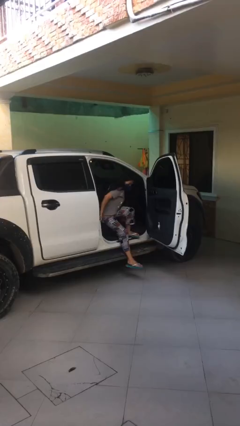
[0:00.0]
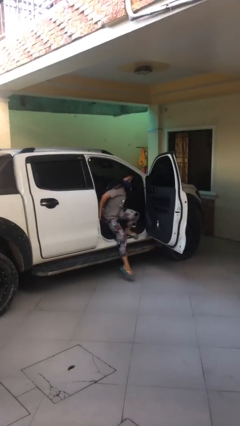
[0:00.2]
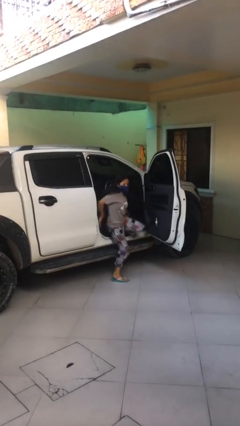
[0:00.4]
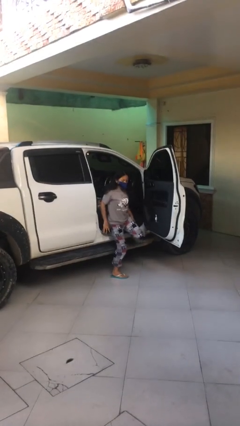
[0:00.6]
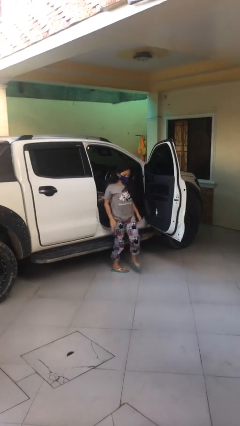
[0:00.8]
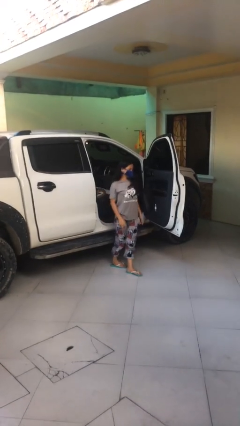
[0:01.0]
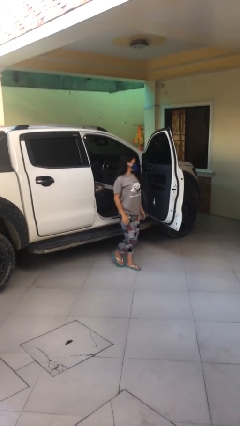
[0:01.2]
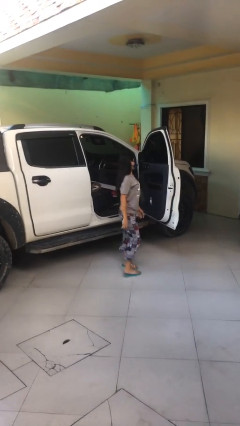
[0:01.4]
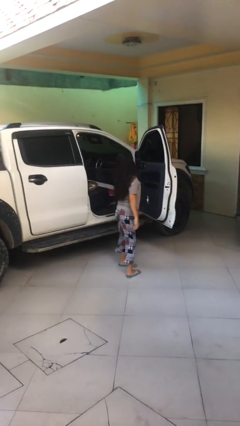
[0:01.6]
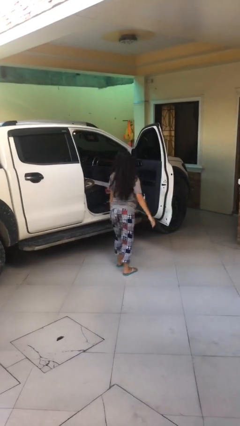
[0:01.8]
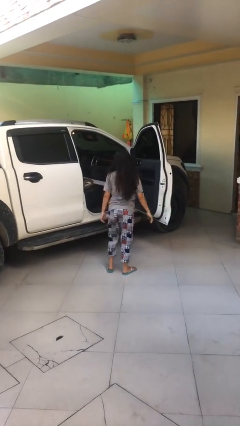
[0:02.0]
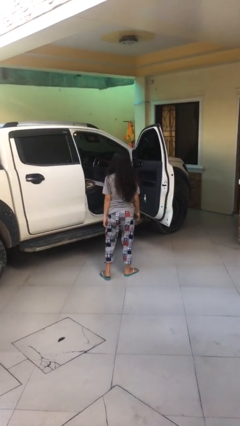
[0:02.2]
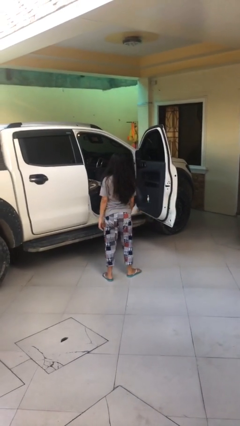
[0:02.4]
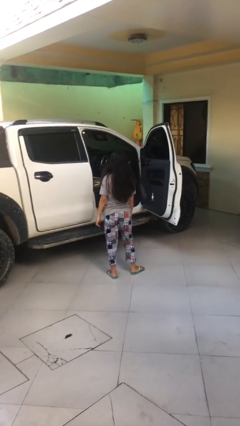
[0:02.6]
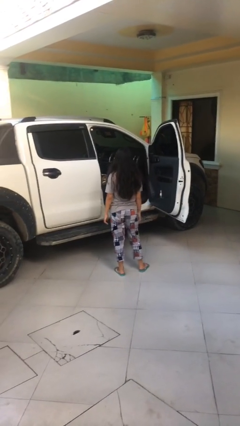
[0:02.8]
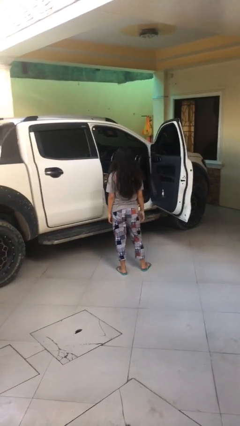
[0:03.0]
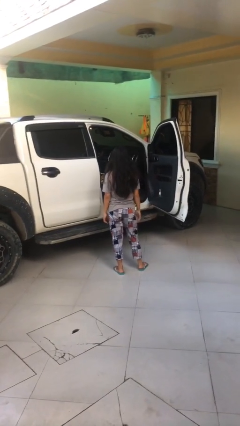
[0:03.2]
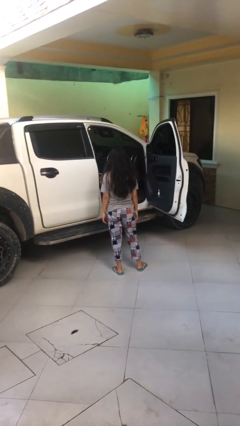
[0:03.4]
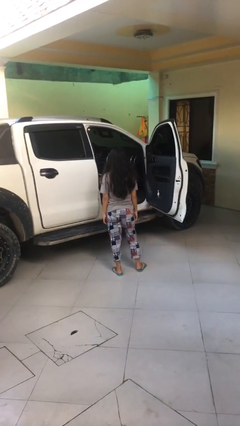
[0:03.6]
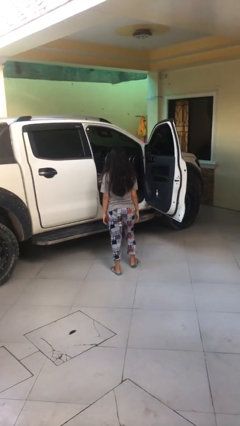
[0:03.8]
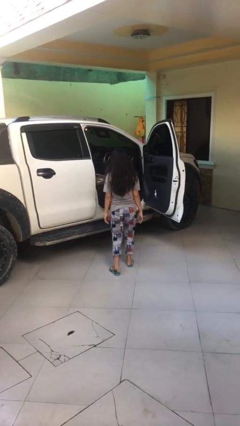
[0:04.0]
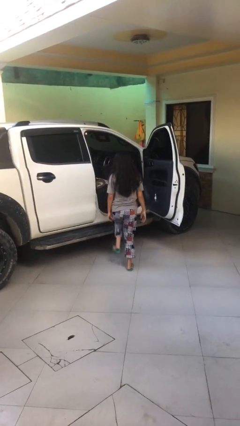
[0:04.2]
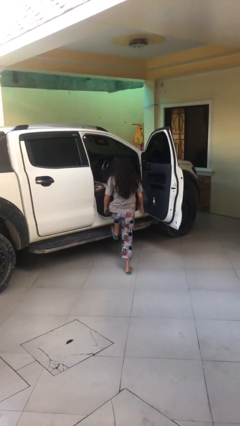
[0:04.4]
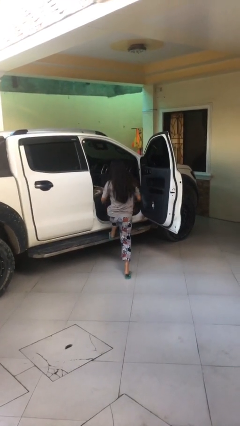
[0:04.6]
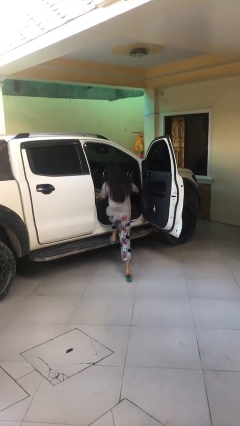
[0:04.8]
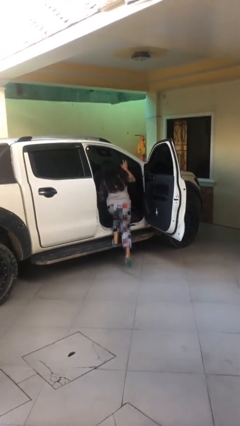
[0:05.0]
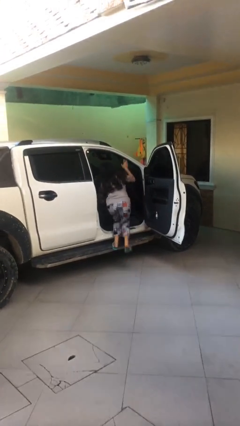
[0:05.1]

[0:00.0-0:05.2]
person exits car

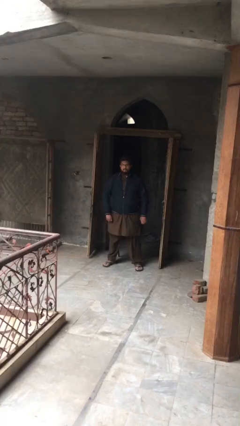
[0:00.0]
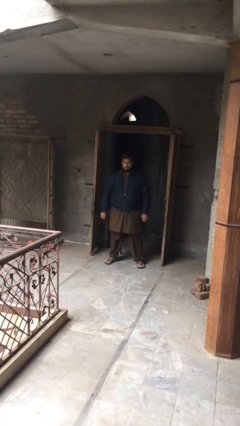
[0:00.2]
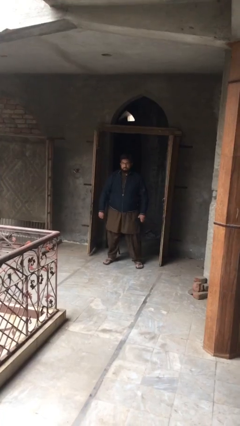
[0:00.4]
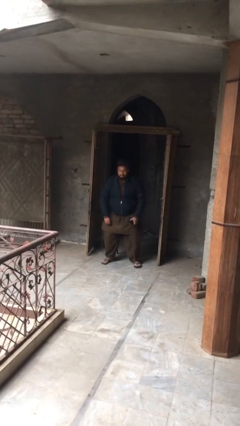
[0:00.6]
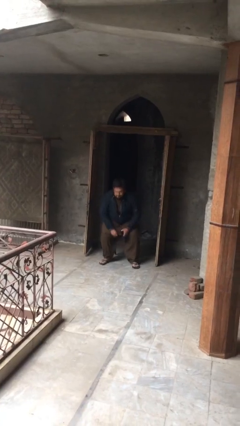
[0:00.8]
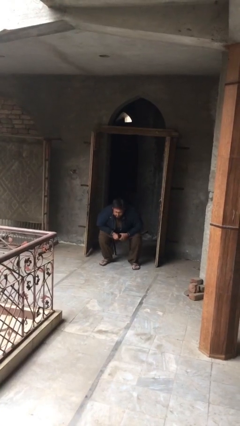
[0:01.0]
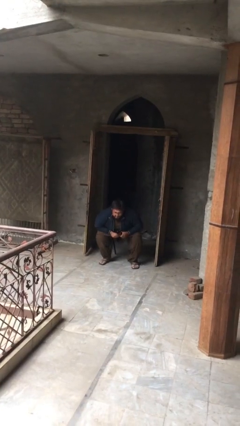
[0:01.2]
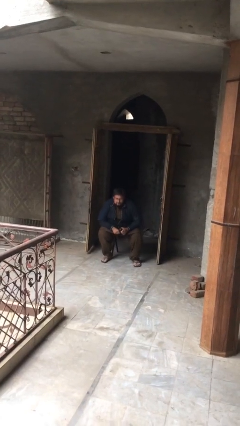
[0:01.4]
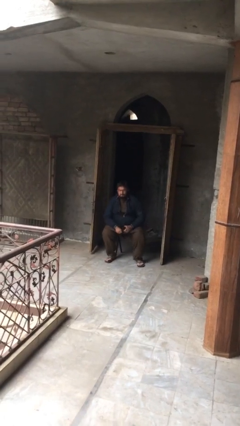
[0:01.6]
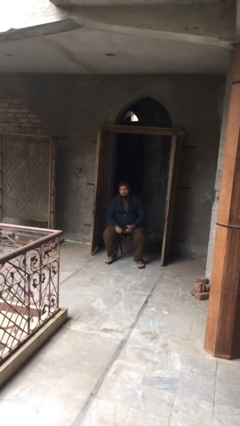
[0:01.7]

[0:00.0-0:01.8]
person sits down

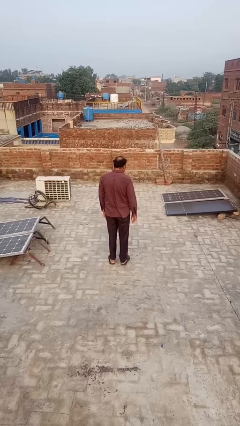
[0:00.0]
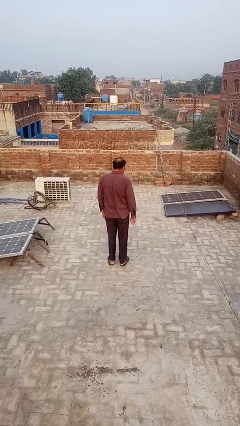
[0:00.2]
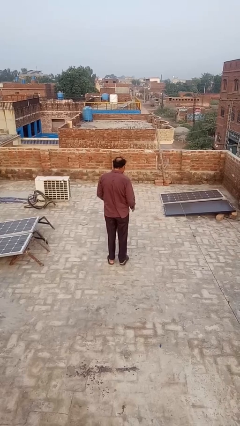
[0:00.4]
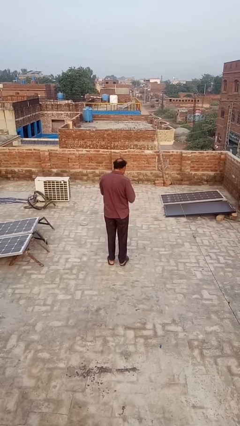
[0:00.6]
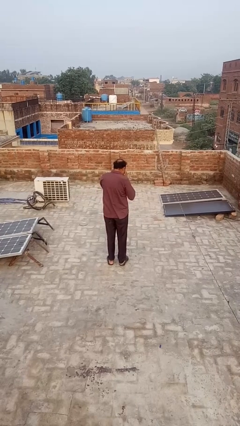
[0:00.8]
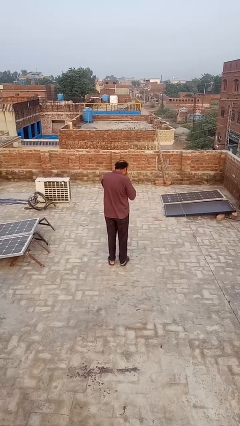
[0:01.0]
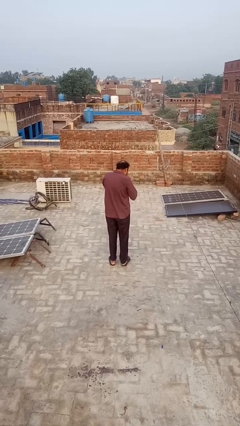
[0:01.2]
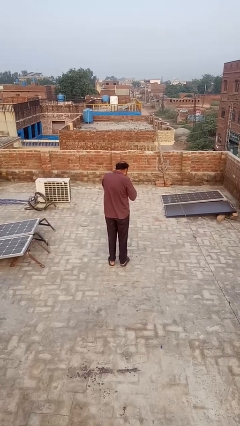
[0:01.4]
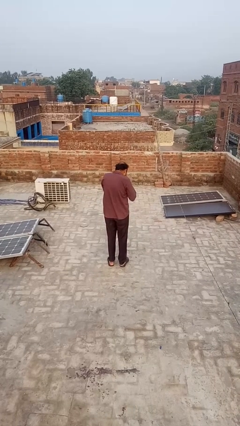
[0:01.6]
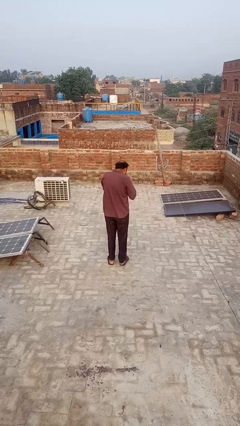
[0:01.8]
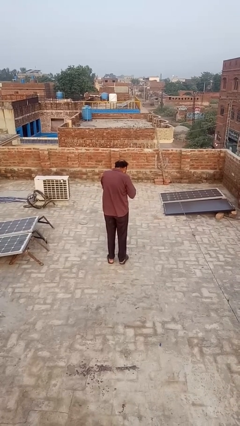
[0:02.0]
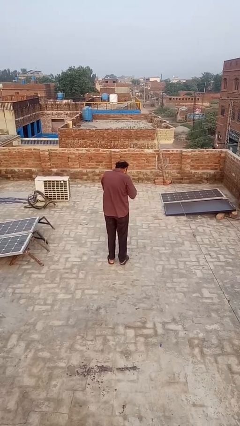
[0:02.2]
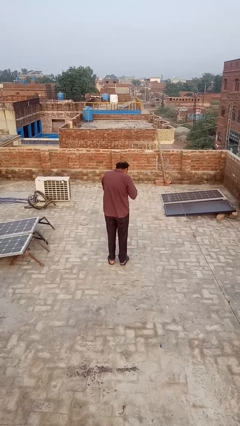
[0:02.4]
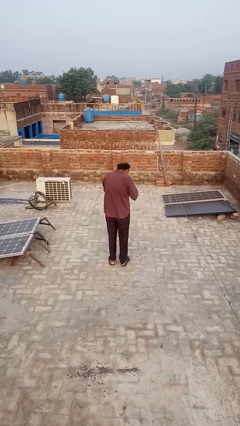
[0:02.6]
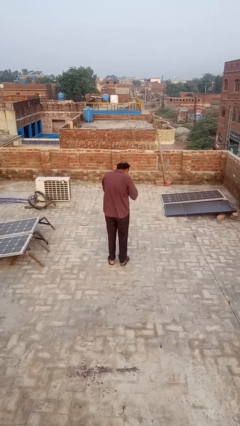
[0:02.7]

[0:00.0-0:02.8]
person blows into hands

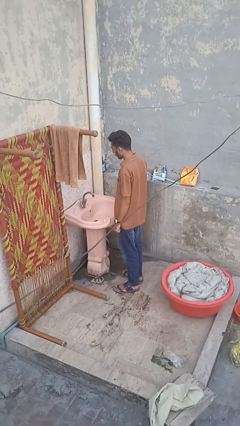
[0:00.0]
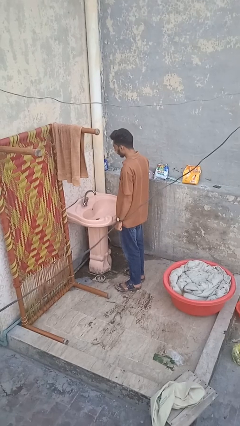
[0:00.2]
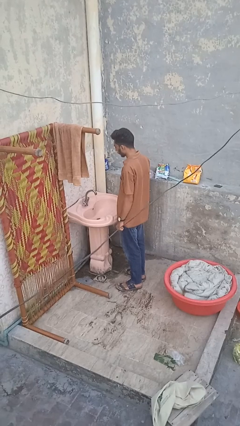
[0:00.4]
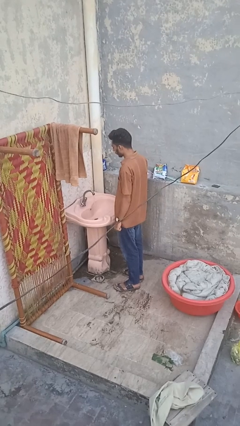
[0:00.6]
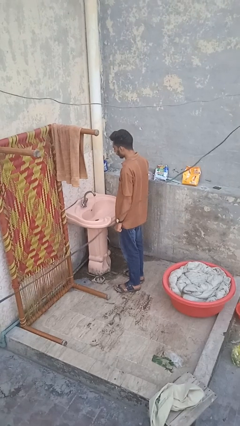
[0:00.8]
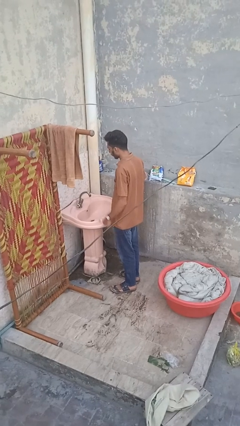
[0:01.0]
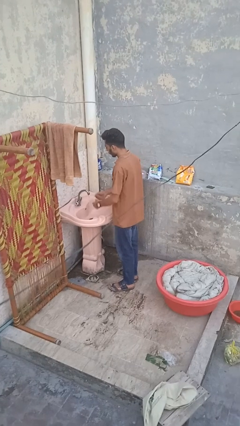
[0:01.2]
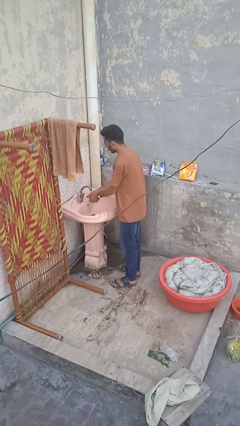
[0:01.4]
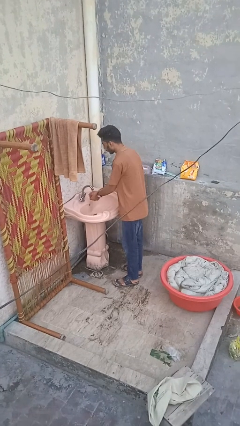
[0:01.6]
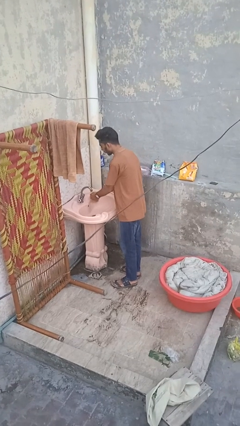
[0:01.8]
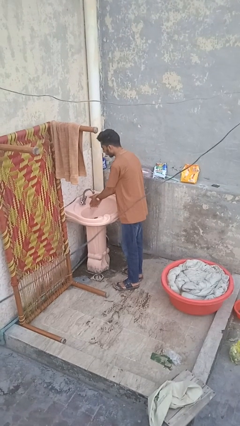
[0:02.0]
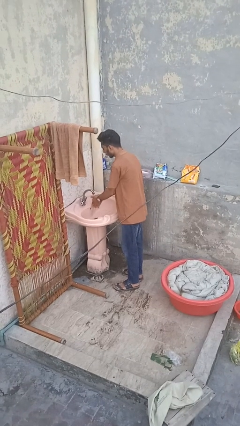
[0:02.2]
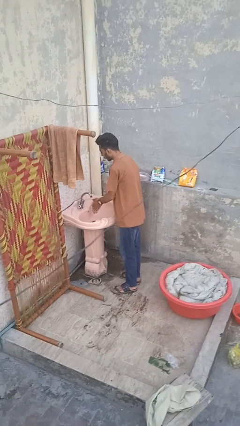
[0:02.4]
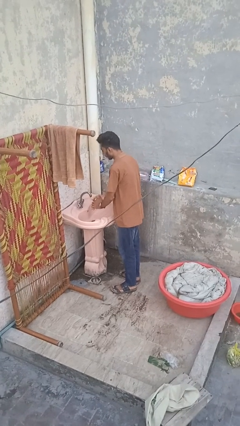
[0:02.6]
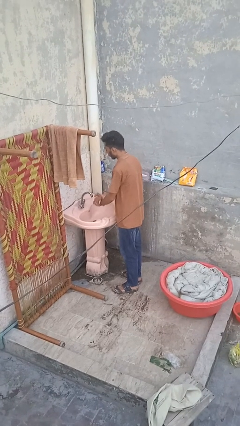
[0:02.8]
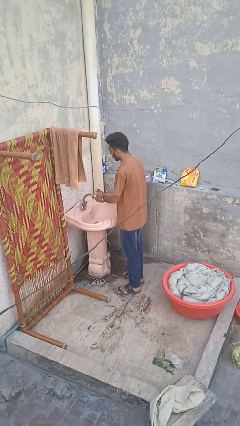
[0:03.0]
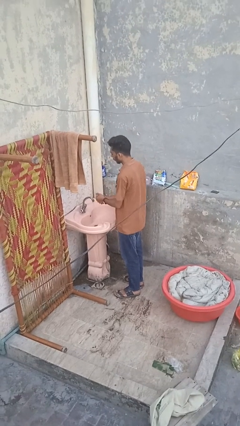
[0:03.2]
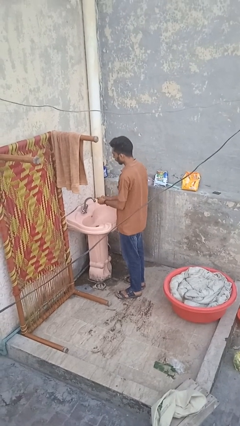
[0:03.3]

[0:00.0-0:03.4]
person washes hands

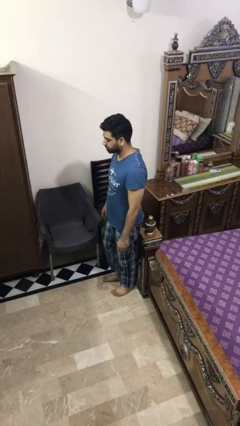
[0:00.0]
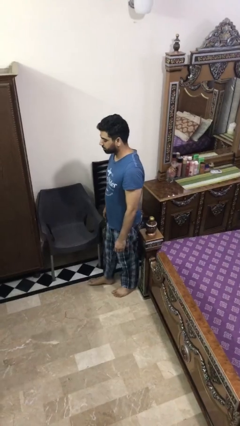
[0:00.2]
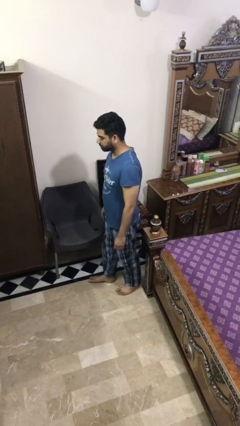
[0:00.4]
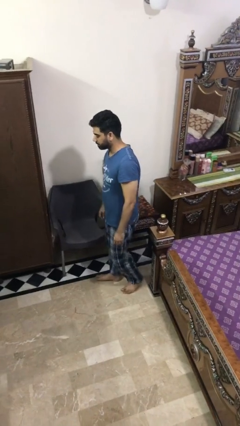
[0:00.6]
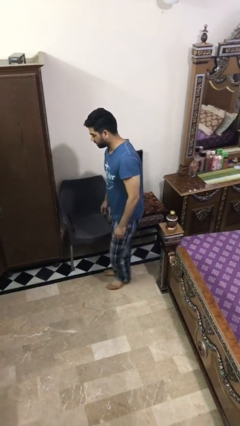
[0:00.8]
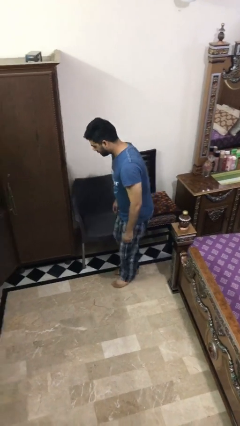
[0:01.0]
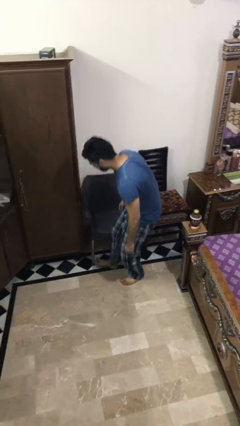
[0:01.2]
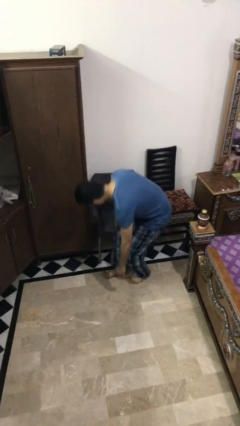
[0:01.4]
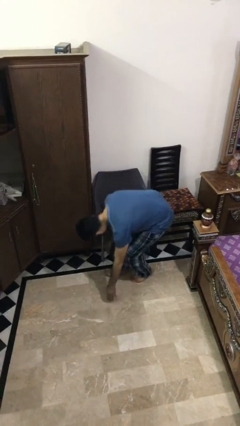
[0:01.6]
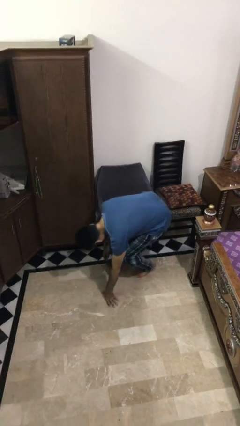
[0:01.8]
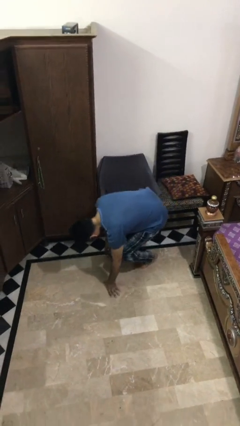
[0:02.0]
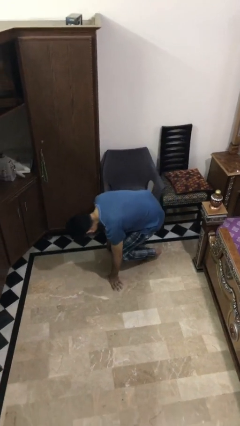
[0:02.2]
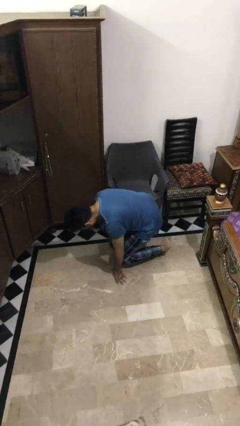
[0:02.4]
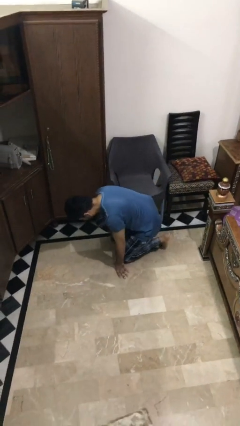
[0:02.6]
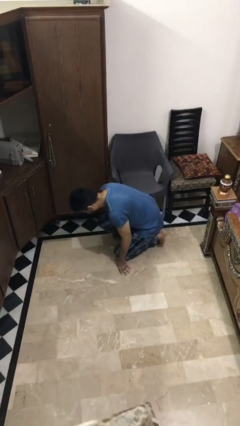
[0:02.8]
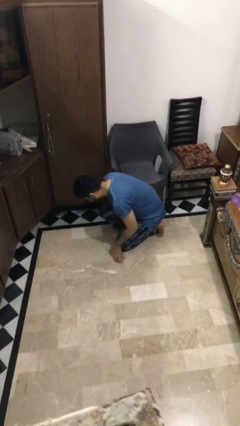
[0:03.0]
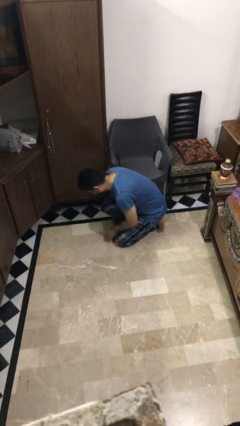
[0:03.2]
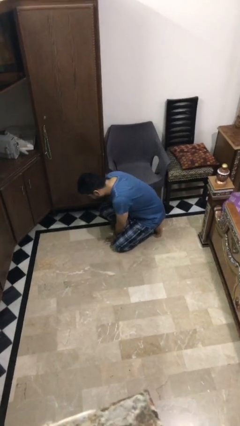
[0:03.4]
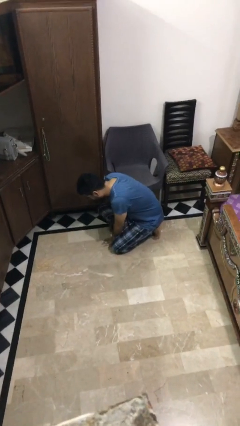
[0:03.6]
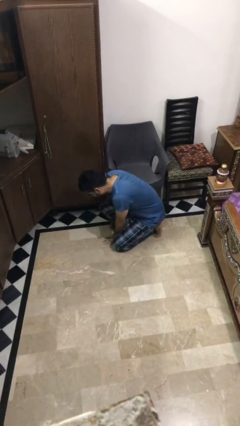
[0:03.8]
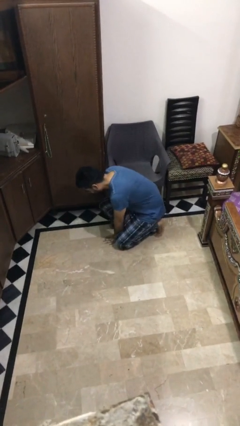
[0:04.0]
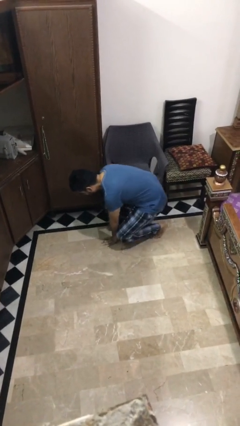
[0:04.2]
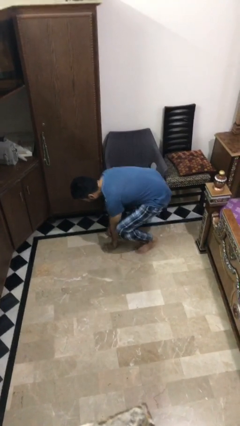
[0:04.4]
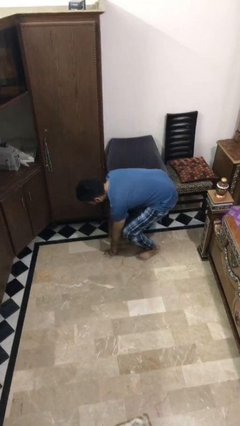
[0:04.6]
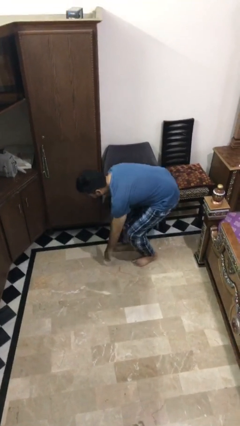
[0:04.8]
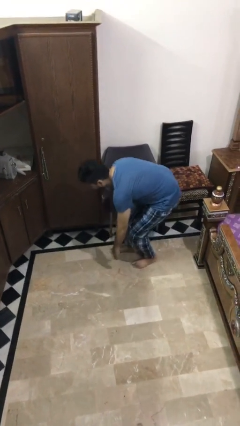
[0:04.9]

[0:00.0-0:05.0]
person stubs toe
